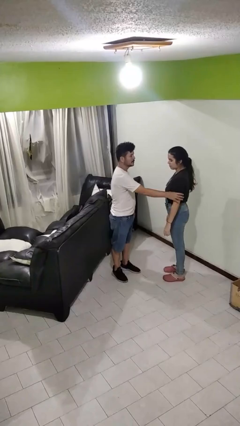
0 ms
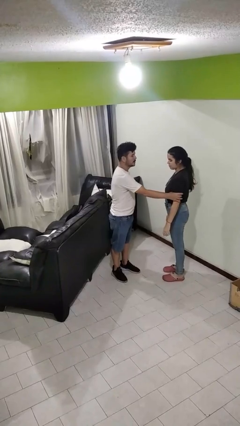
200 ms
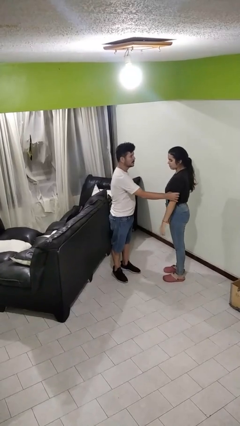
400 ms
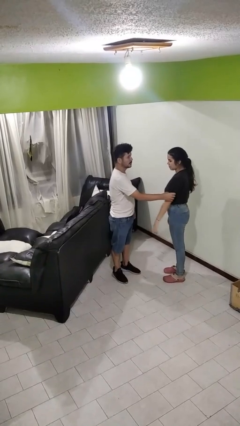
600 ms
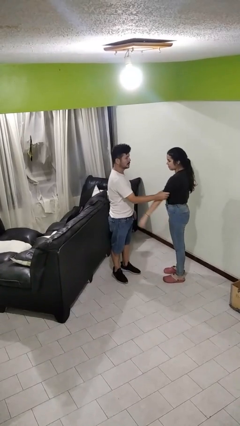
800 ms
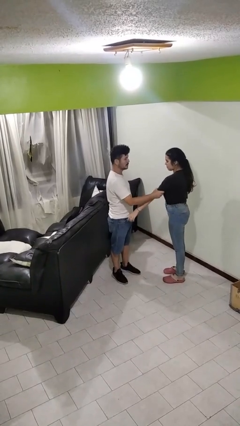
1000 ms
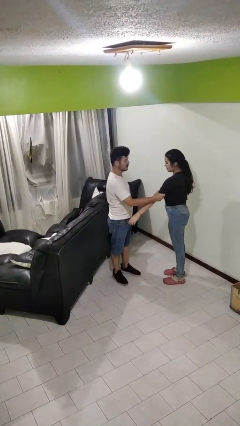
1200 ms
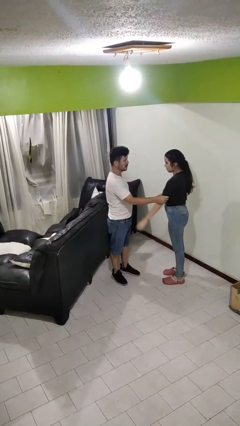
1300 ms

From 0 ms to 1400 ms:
person grabs person by bicep

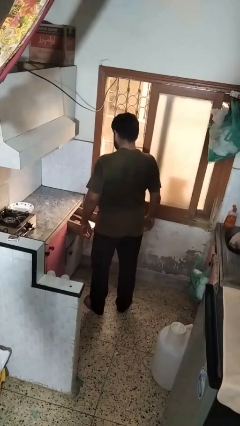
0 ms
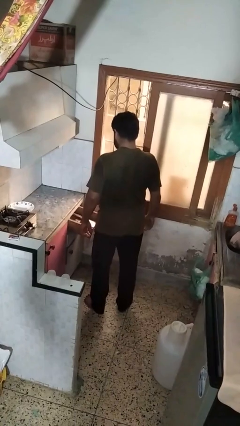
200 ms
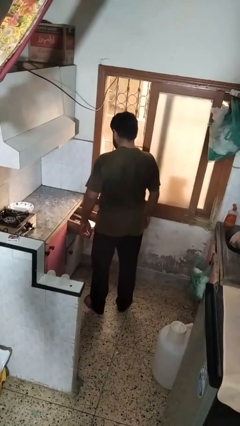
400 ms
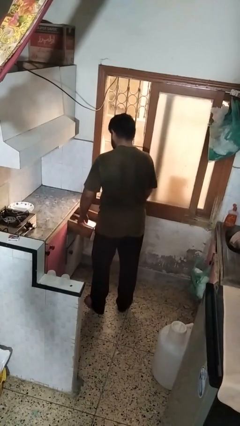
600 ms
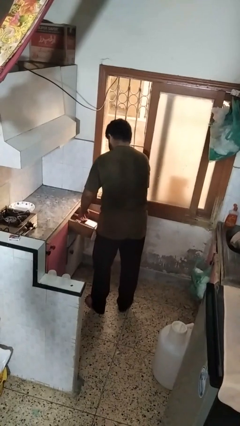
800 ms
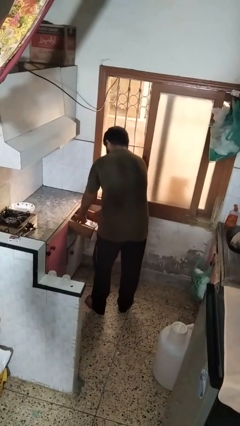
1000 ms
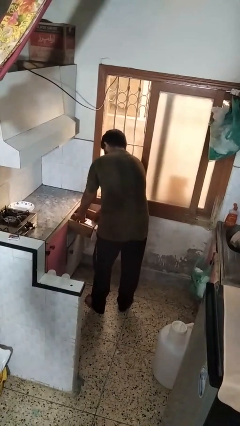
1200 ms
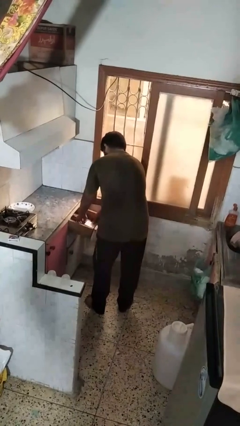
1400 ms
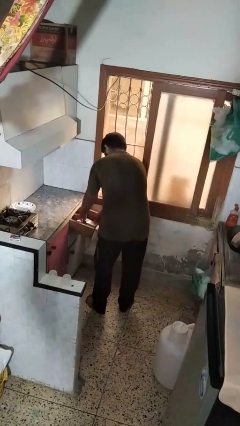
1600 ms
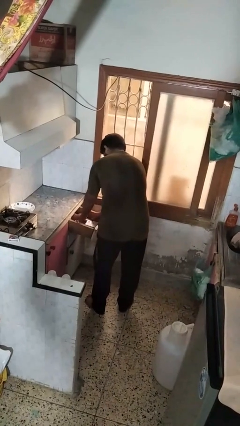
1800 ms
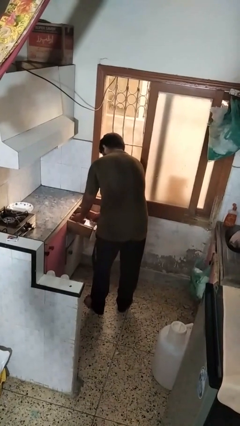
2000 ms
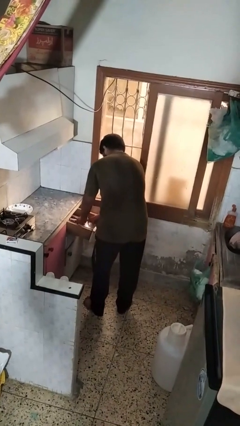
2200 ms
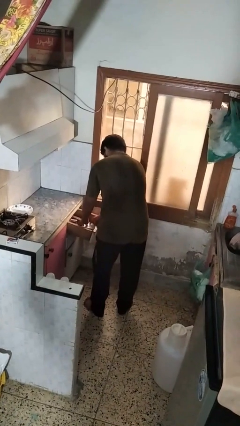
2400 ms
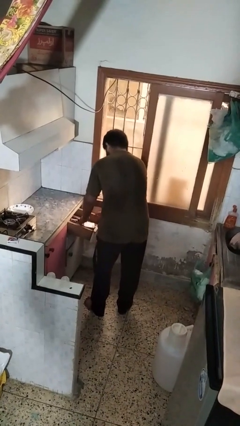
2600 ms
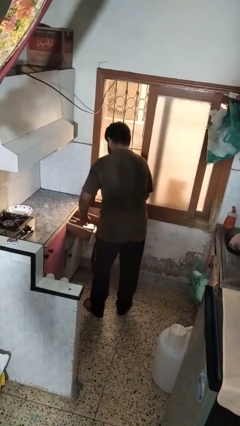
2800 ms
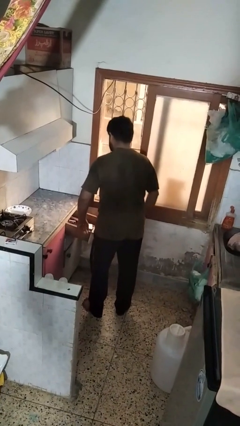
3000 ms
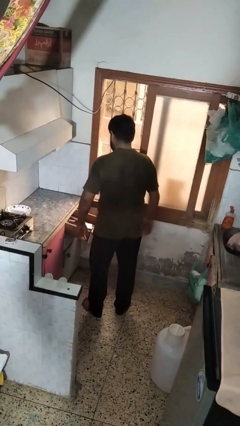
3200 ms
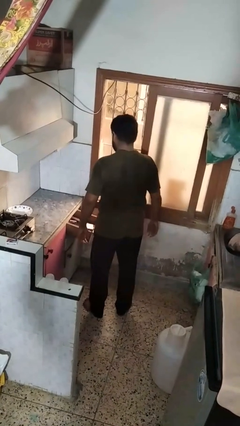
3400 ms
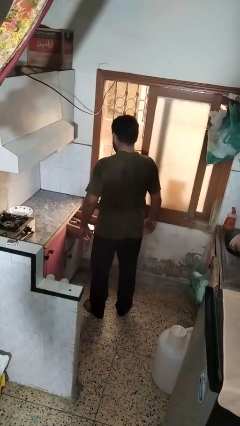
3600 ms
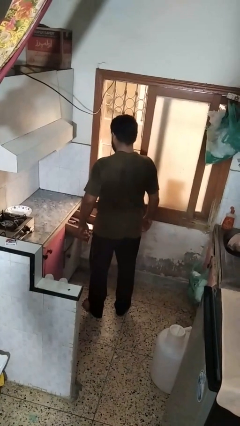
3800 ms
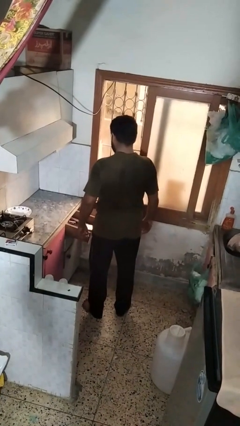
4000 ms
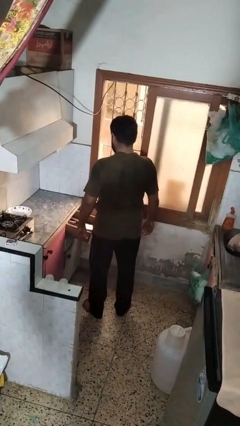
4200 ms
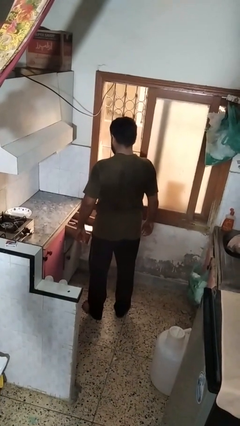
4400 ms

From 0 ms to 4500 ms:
person searches in kitchen drawer

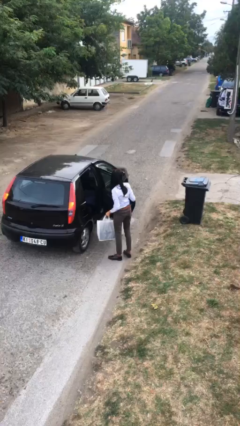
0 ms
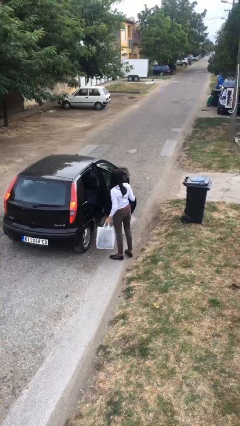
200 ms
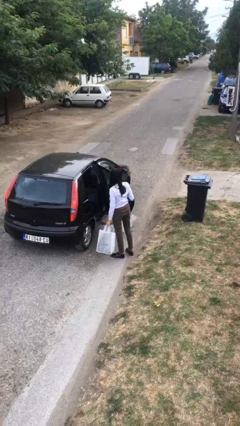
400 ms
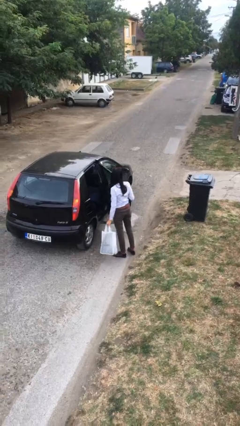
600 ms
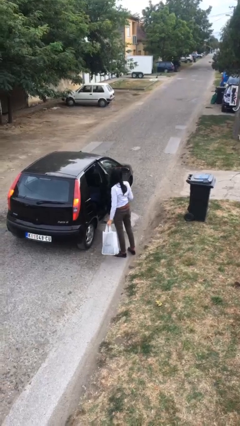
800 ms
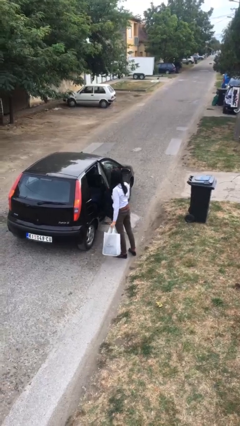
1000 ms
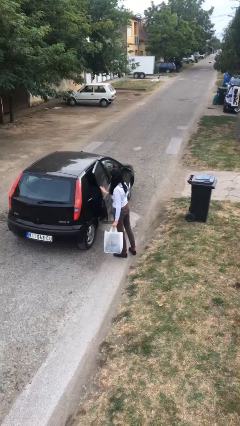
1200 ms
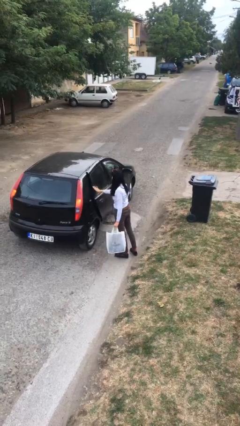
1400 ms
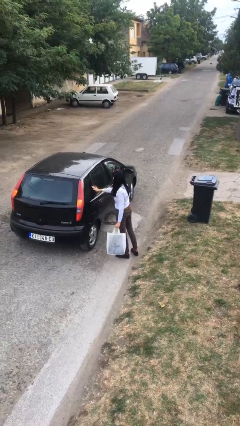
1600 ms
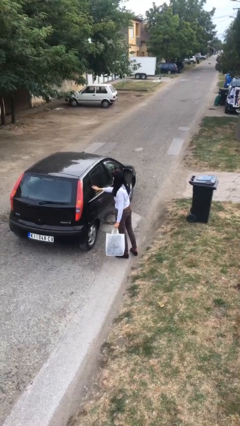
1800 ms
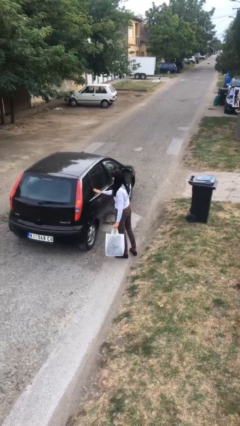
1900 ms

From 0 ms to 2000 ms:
person closes car door

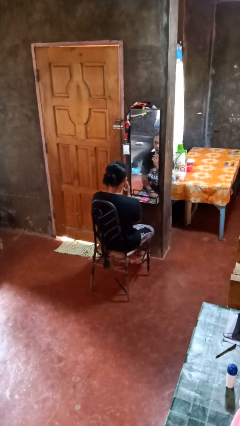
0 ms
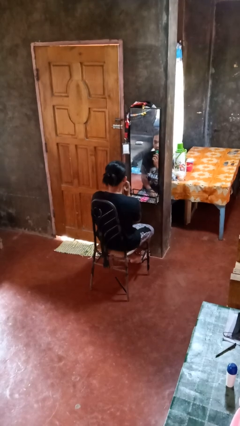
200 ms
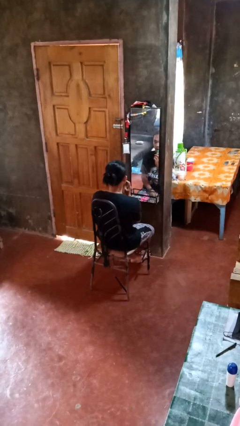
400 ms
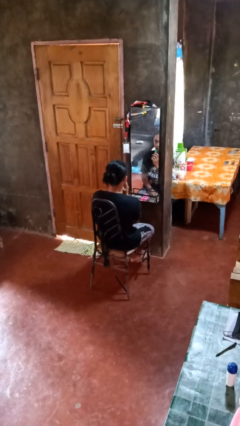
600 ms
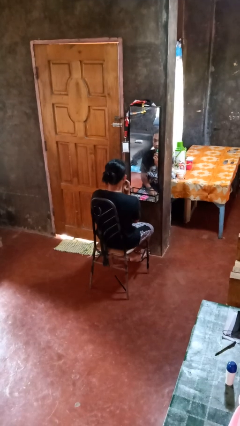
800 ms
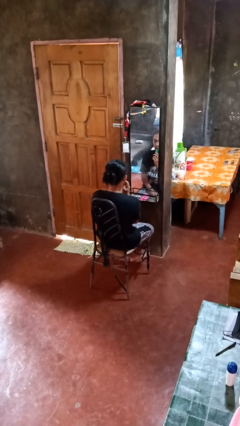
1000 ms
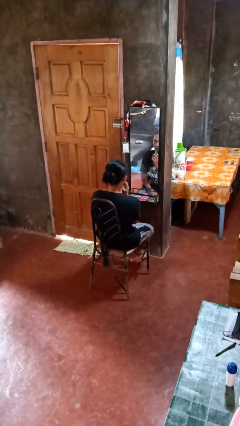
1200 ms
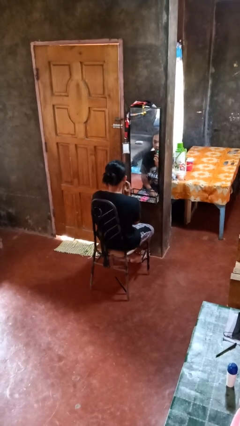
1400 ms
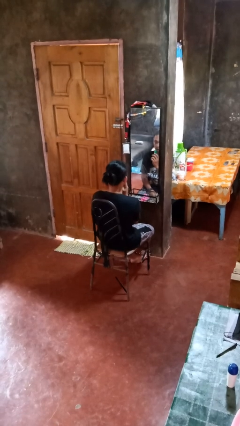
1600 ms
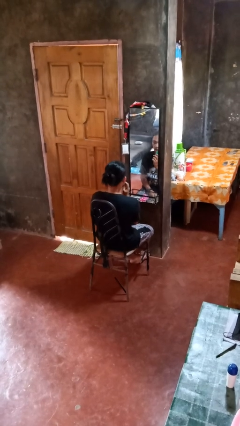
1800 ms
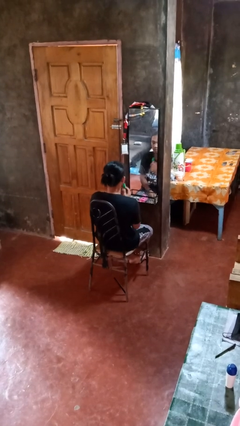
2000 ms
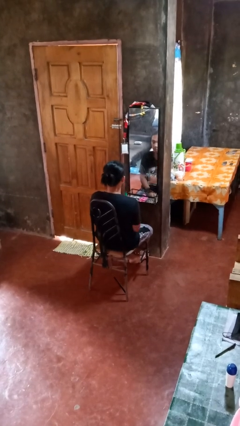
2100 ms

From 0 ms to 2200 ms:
person applies lip makeup

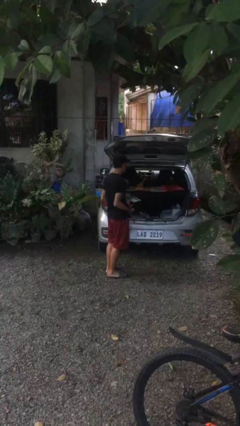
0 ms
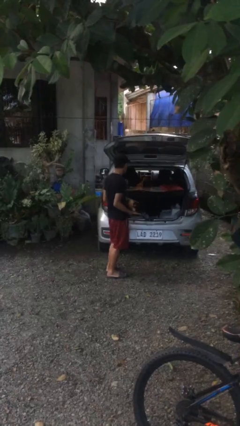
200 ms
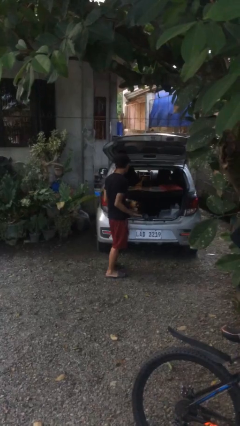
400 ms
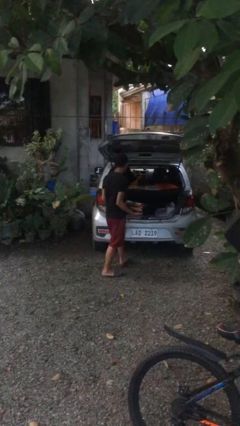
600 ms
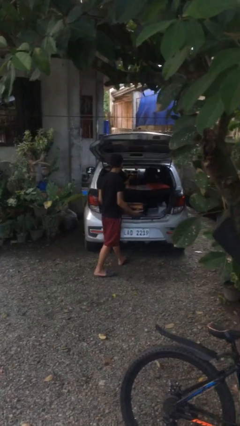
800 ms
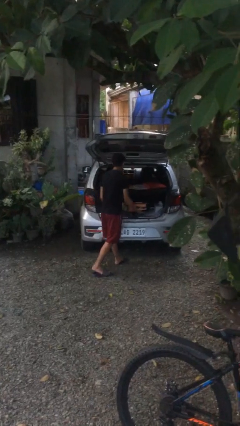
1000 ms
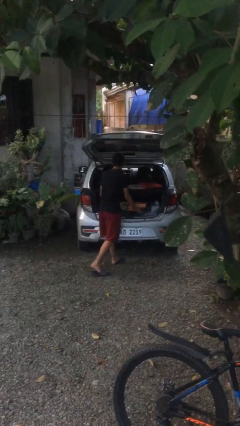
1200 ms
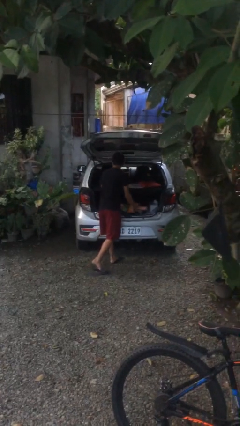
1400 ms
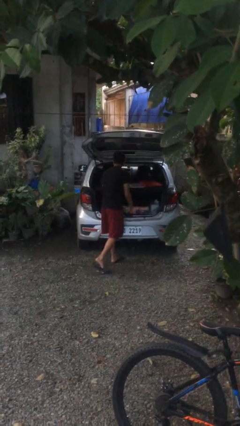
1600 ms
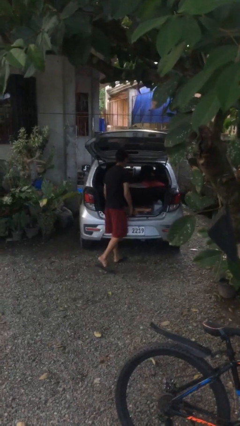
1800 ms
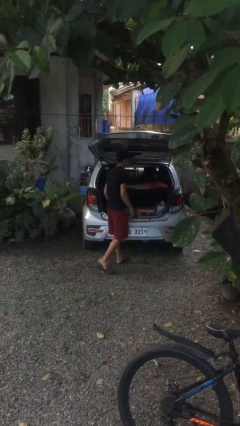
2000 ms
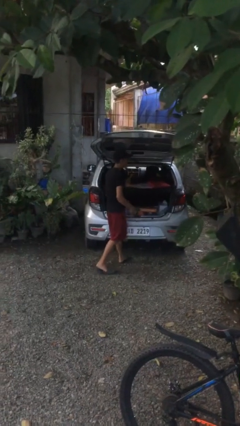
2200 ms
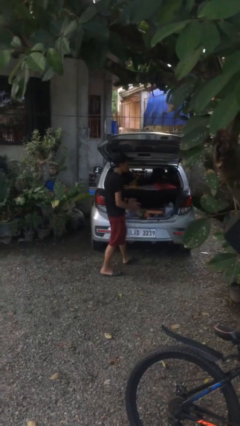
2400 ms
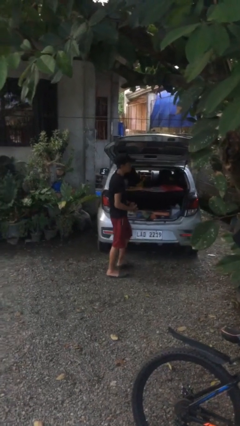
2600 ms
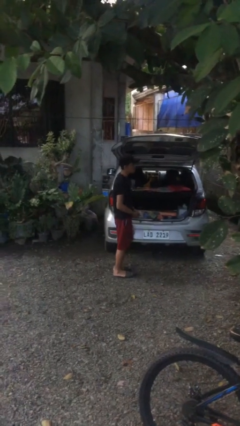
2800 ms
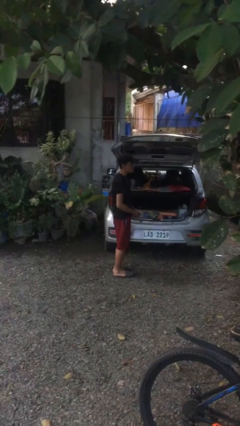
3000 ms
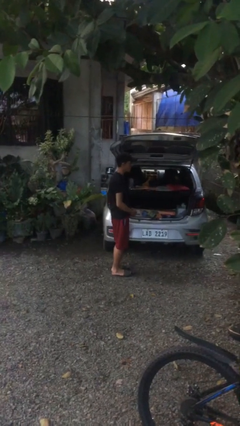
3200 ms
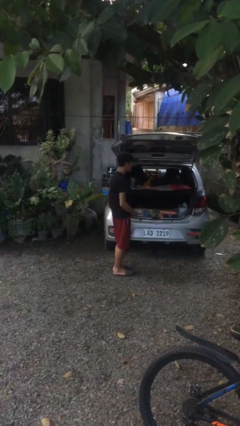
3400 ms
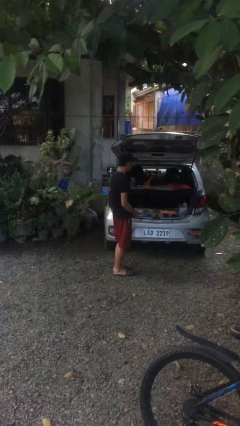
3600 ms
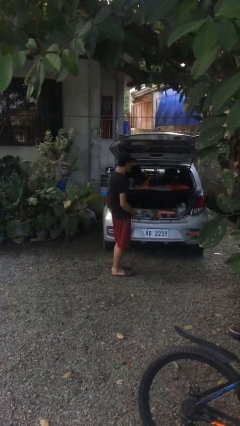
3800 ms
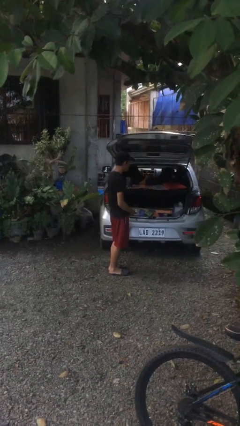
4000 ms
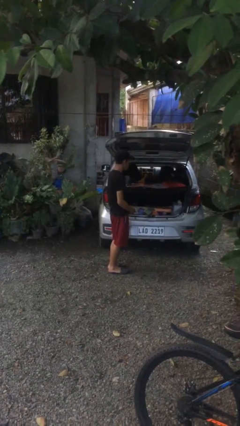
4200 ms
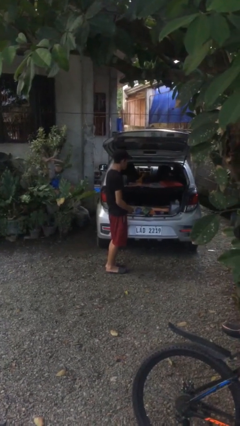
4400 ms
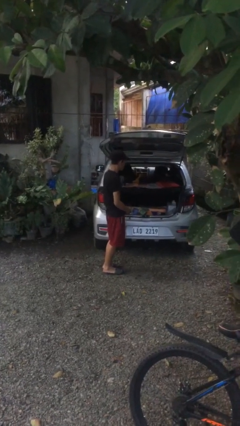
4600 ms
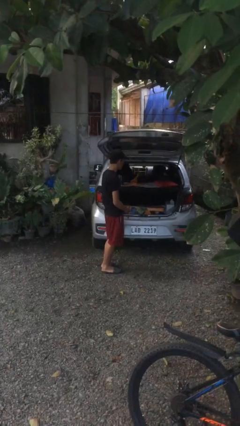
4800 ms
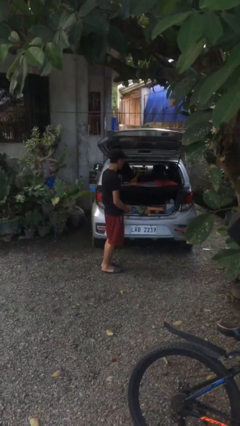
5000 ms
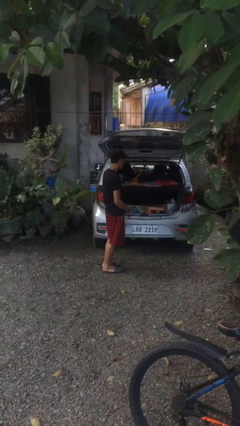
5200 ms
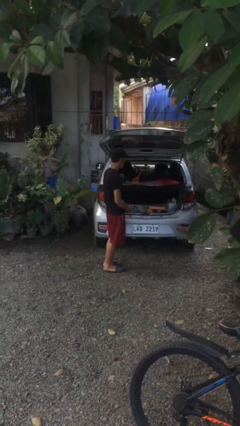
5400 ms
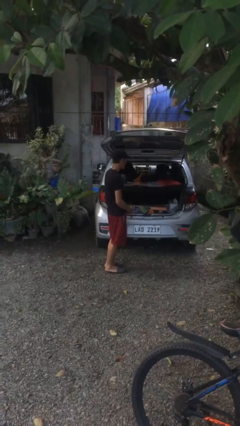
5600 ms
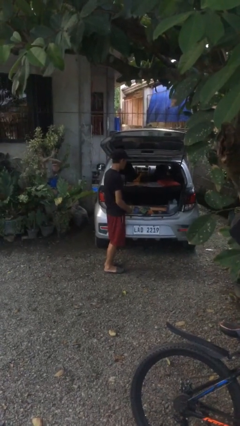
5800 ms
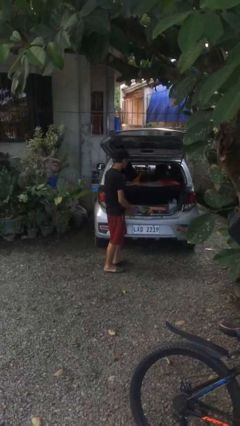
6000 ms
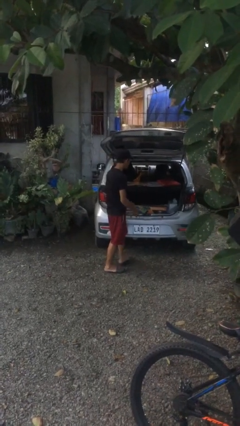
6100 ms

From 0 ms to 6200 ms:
person loads car

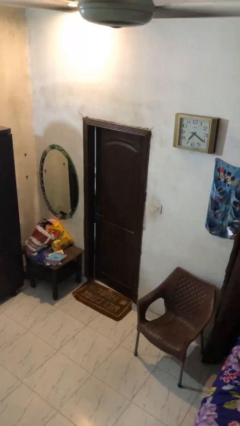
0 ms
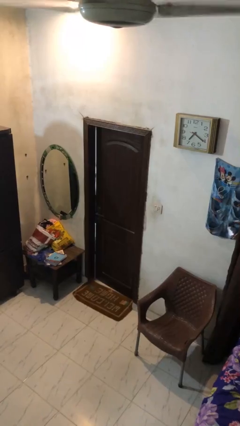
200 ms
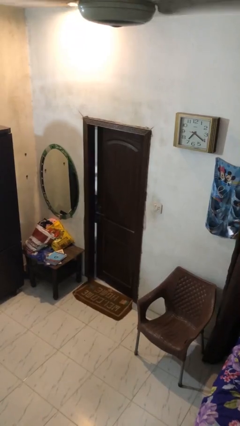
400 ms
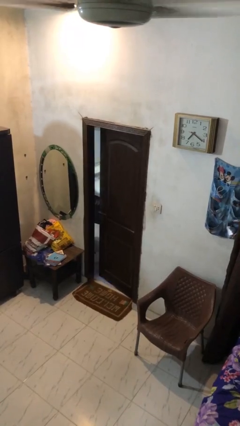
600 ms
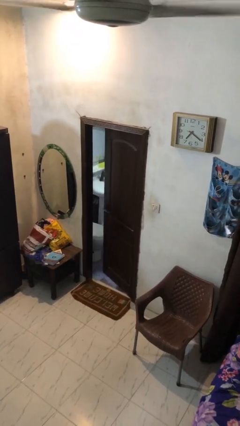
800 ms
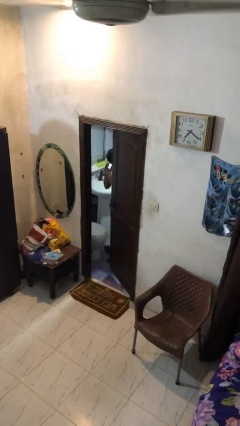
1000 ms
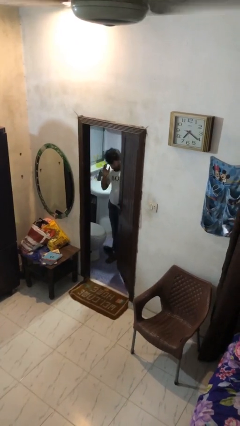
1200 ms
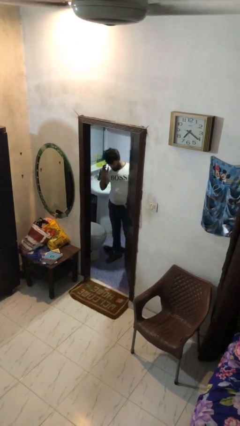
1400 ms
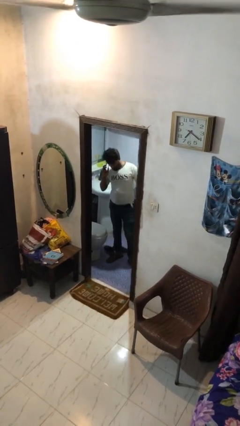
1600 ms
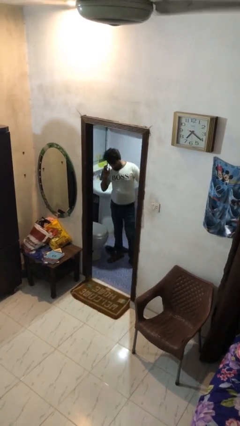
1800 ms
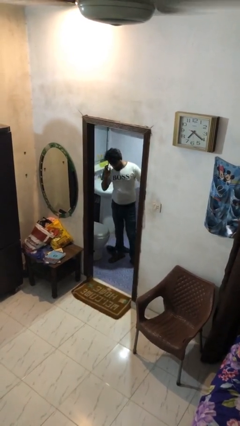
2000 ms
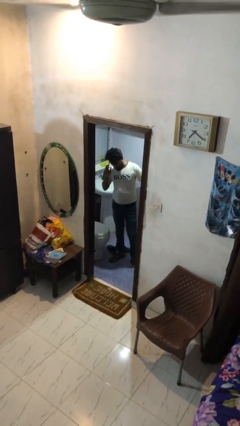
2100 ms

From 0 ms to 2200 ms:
person opens facility door
